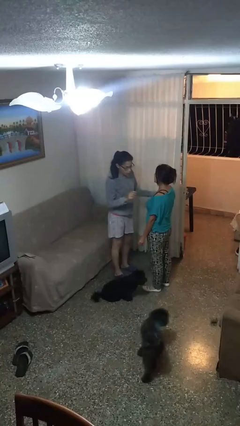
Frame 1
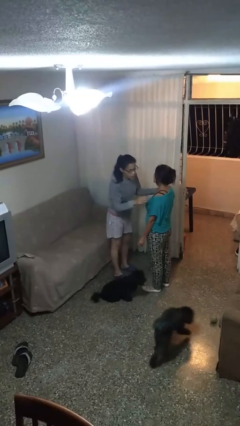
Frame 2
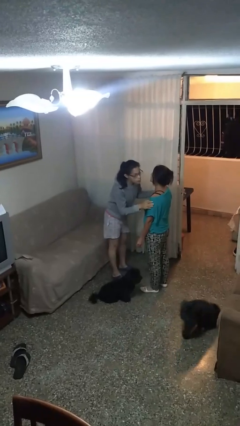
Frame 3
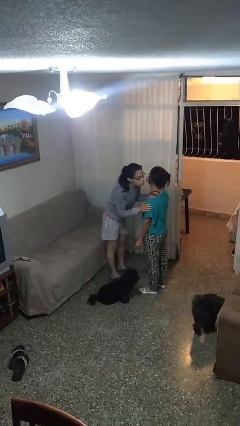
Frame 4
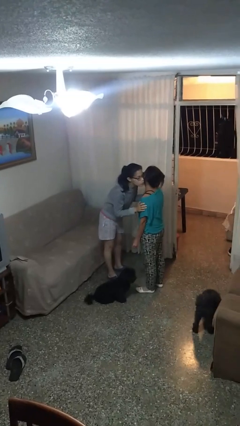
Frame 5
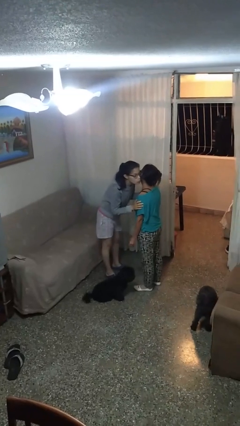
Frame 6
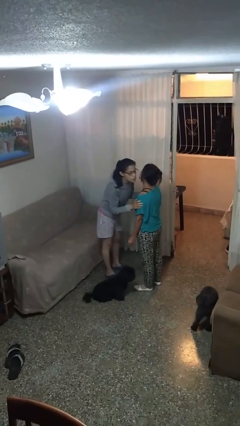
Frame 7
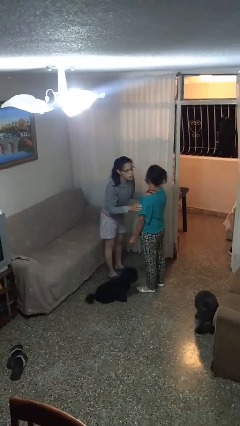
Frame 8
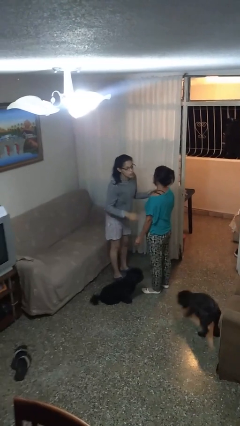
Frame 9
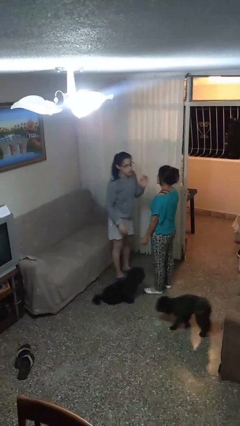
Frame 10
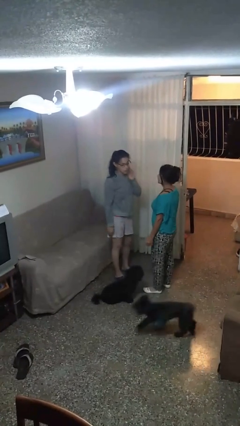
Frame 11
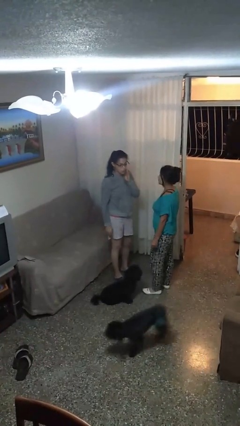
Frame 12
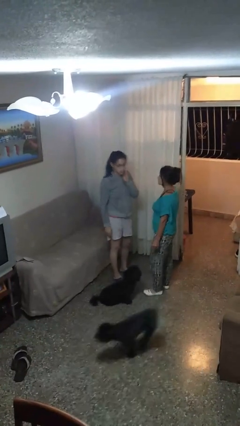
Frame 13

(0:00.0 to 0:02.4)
person kisses cheek of person

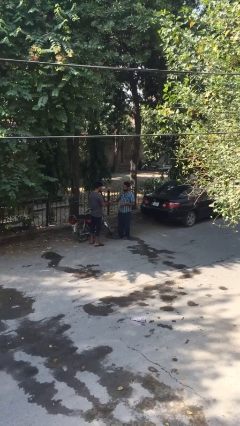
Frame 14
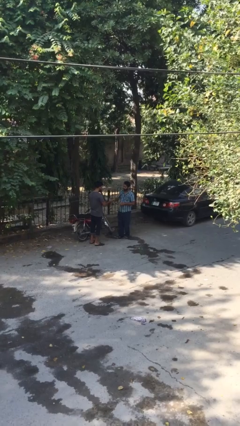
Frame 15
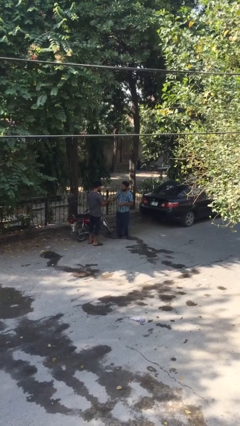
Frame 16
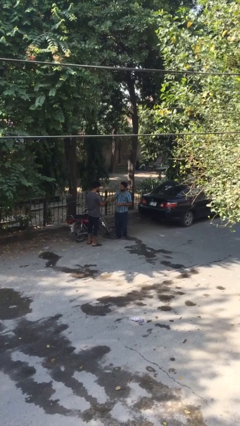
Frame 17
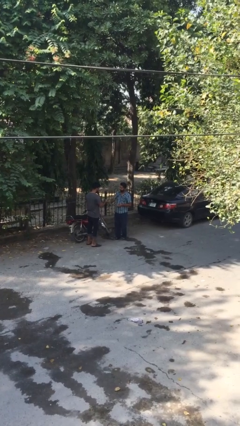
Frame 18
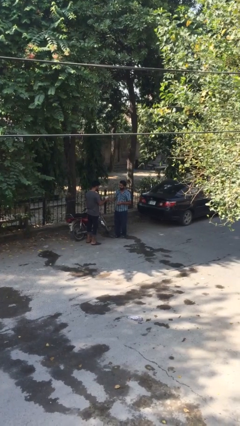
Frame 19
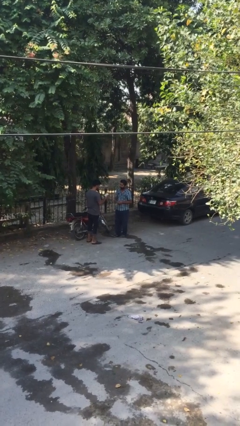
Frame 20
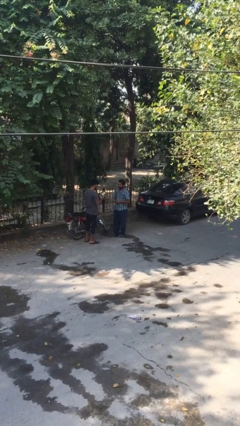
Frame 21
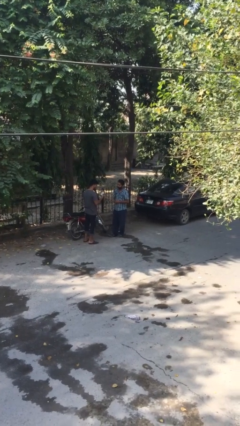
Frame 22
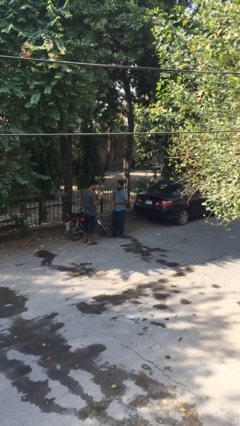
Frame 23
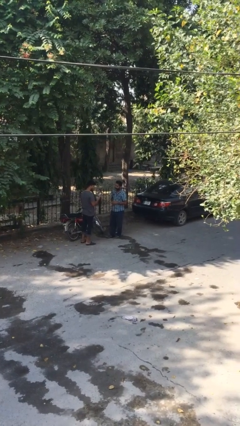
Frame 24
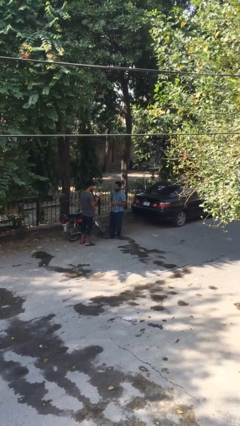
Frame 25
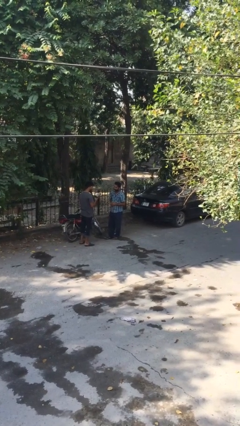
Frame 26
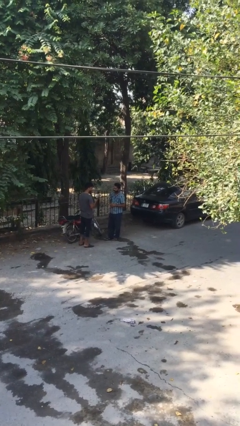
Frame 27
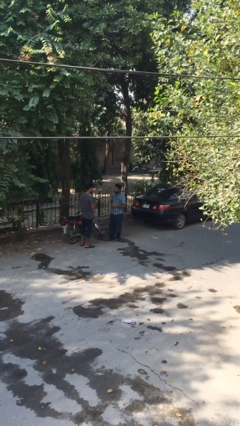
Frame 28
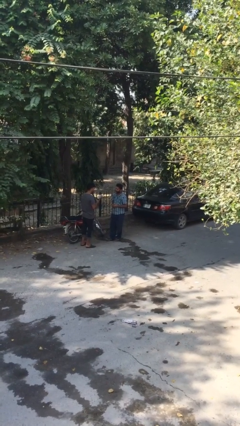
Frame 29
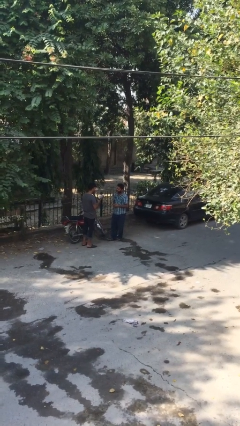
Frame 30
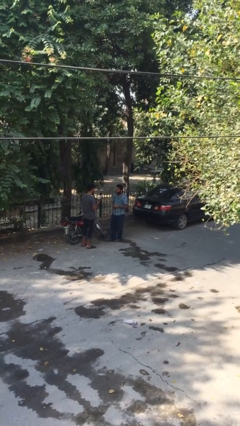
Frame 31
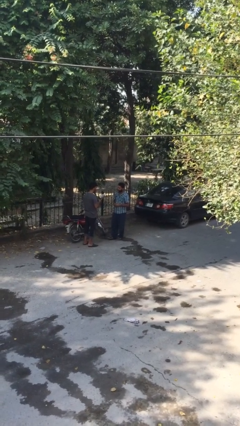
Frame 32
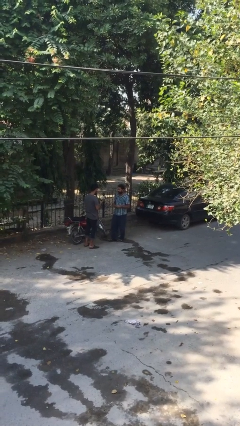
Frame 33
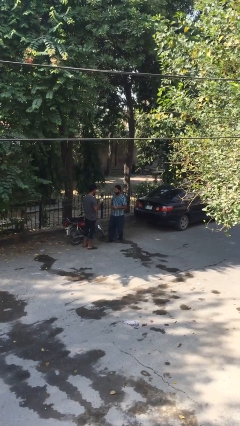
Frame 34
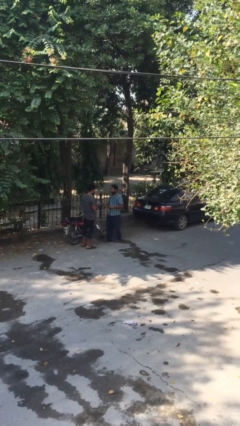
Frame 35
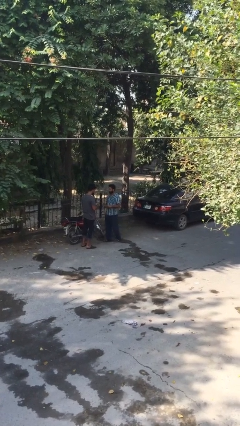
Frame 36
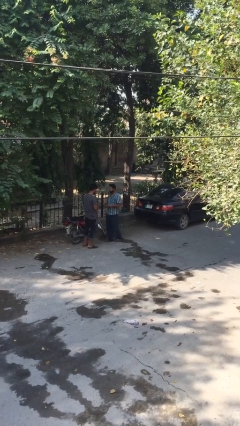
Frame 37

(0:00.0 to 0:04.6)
person transfers object to person

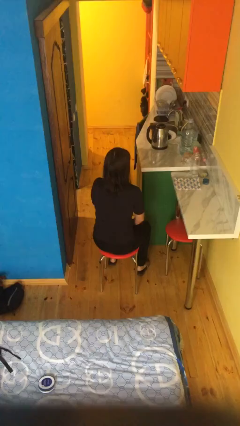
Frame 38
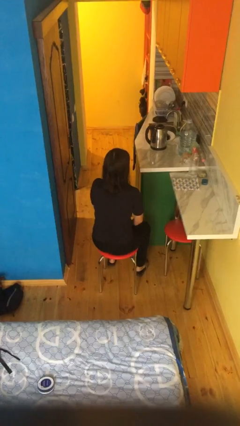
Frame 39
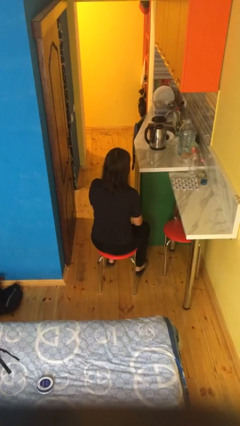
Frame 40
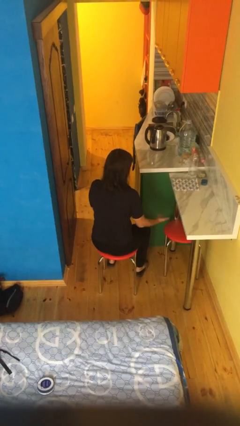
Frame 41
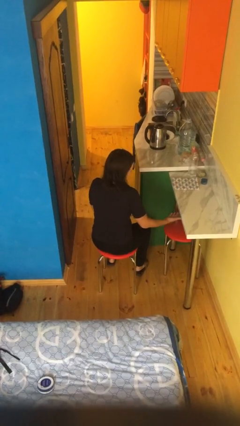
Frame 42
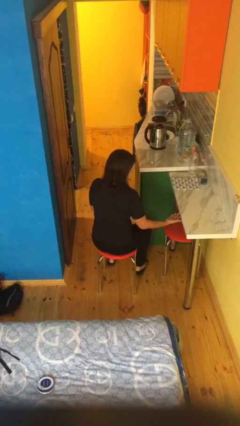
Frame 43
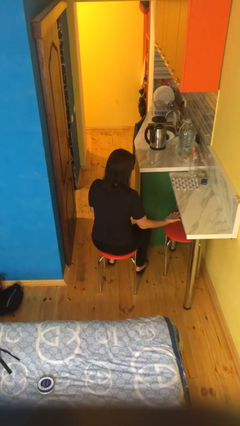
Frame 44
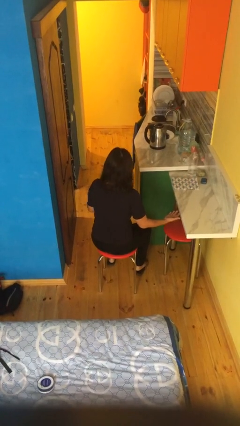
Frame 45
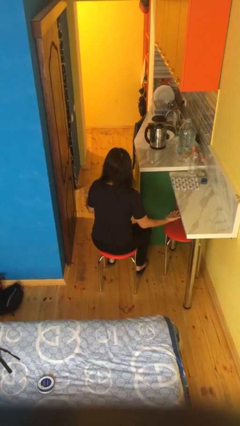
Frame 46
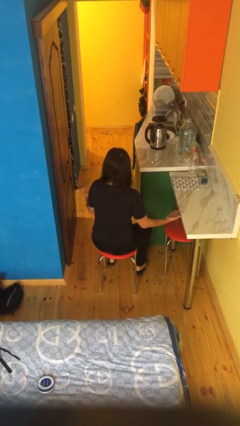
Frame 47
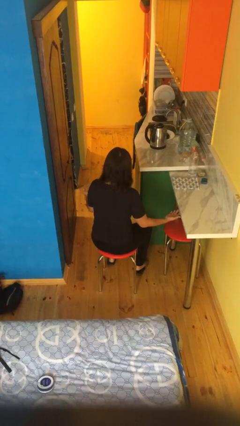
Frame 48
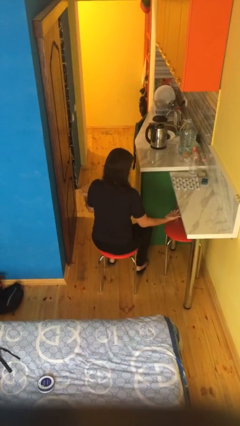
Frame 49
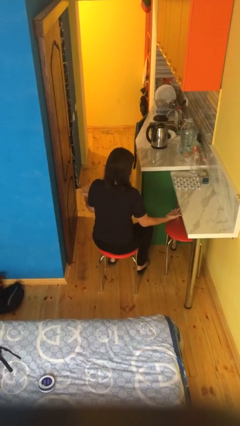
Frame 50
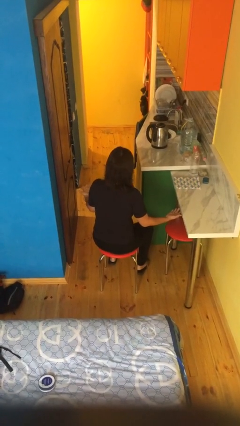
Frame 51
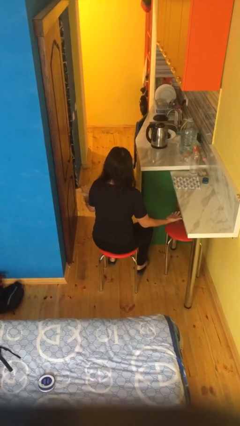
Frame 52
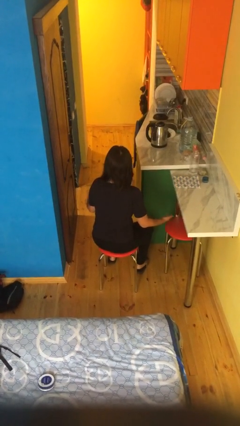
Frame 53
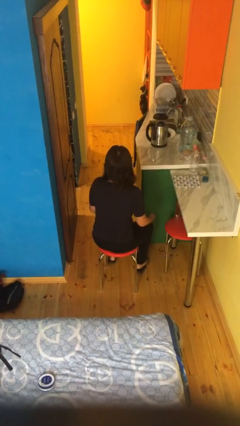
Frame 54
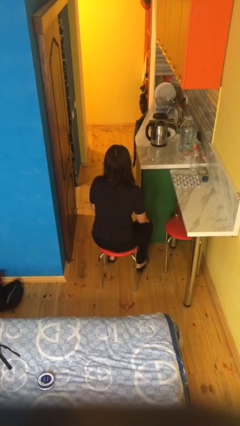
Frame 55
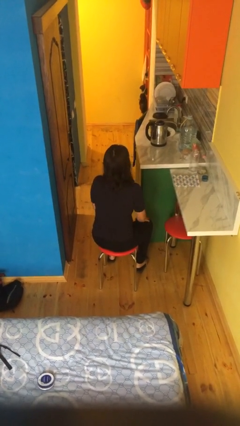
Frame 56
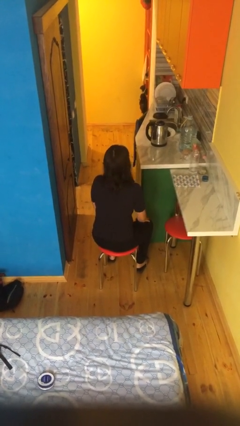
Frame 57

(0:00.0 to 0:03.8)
person looks at hands in lap

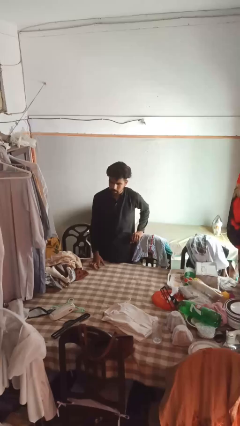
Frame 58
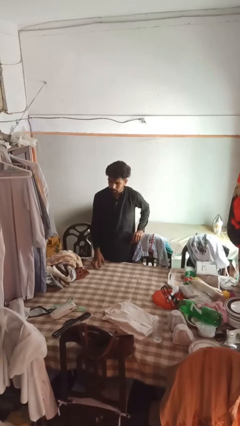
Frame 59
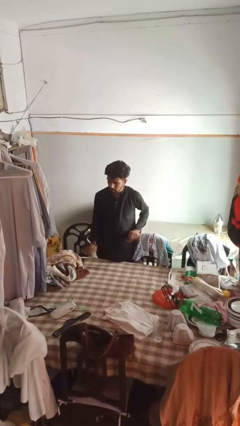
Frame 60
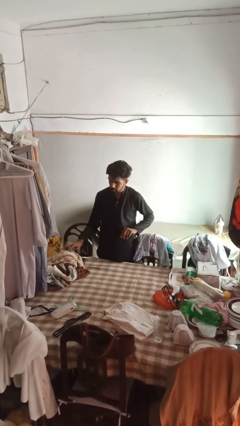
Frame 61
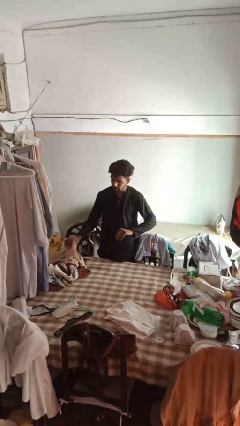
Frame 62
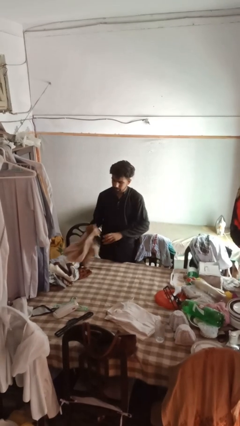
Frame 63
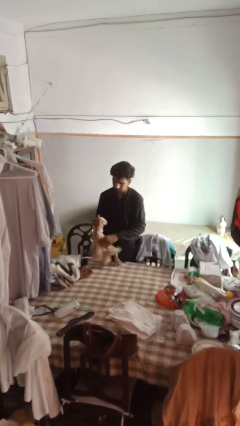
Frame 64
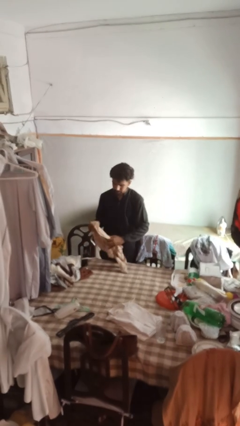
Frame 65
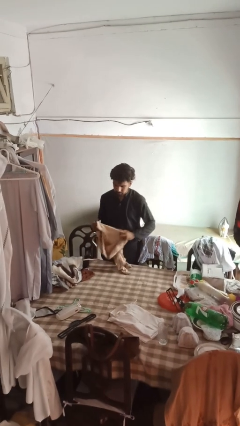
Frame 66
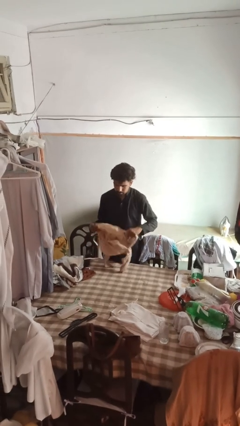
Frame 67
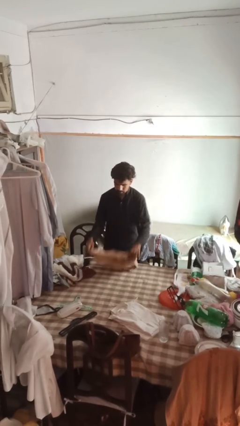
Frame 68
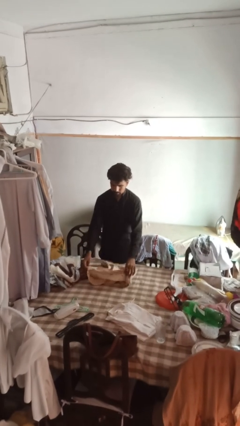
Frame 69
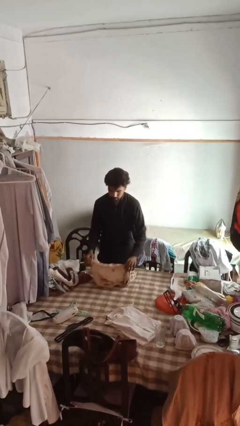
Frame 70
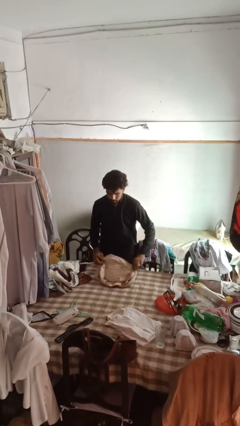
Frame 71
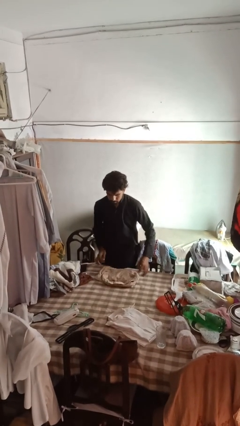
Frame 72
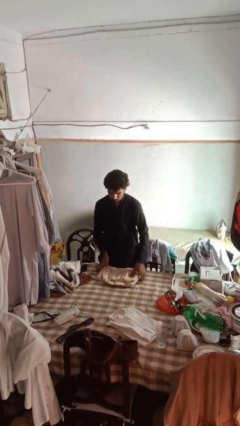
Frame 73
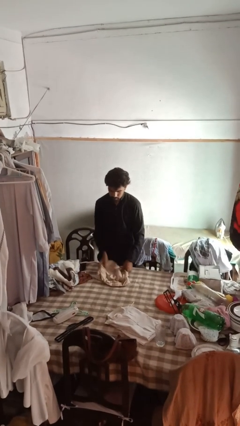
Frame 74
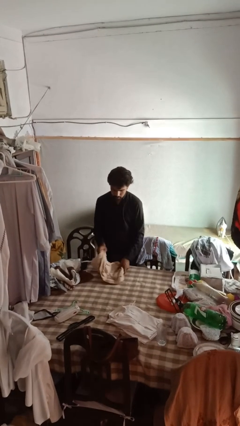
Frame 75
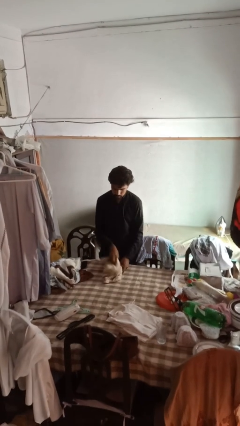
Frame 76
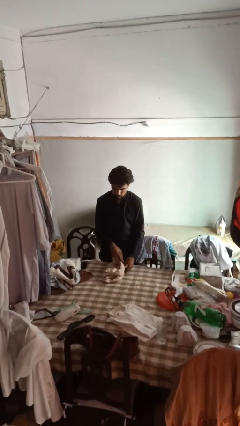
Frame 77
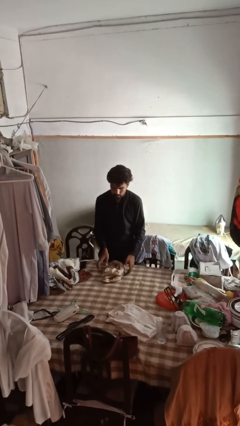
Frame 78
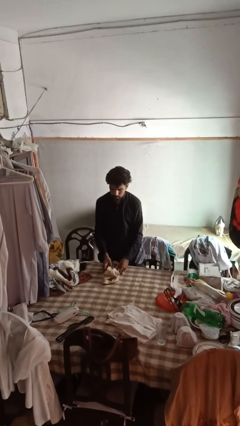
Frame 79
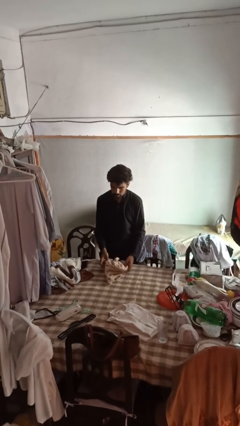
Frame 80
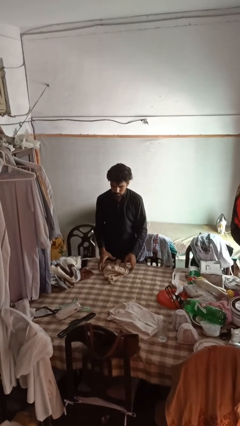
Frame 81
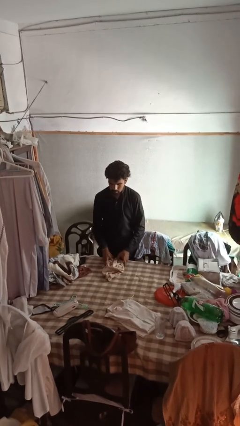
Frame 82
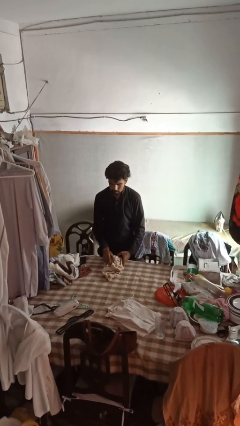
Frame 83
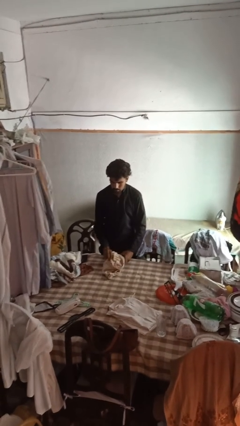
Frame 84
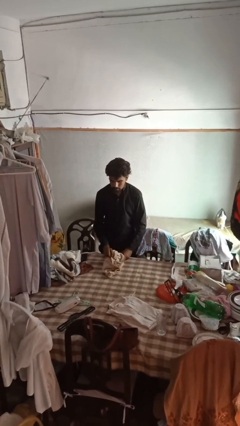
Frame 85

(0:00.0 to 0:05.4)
person folds shirt

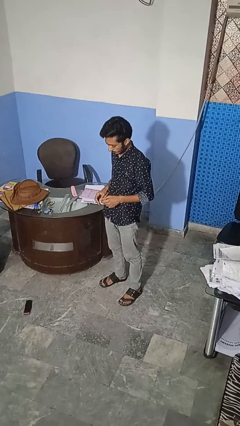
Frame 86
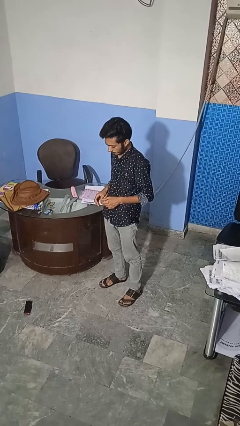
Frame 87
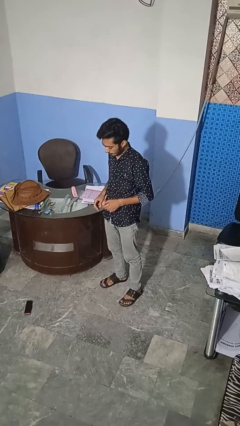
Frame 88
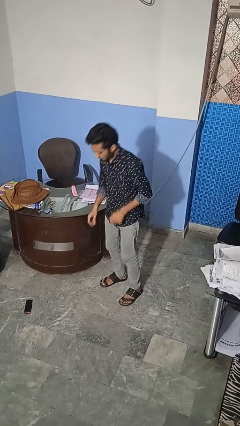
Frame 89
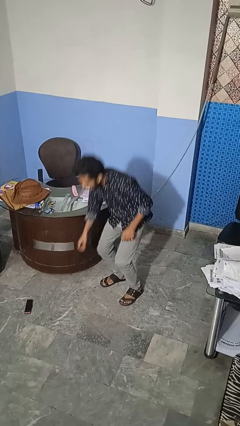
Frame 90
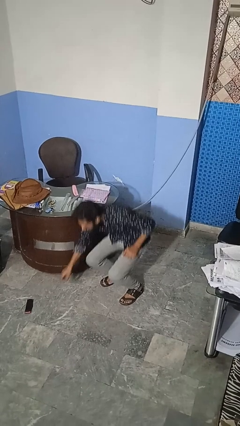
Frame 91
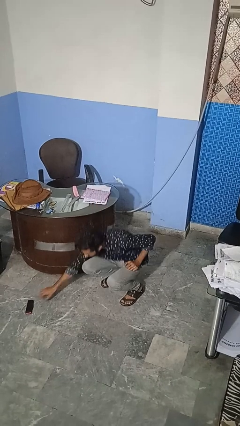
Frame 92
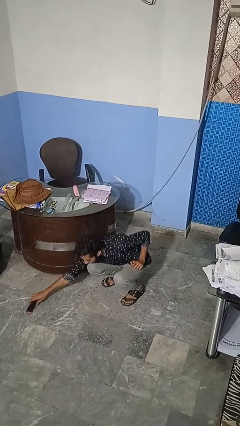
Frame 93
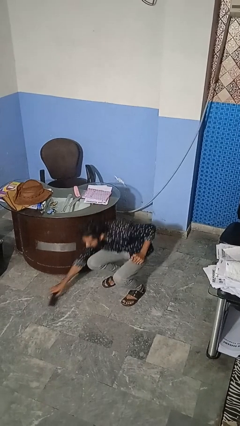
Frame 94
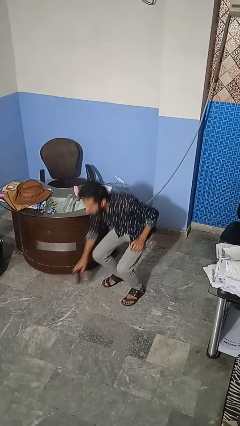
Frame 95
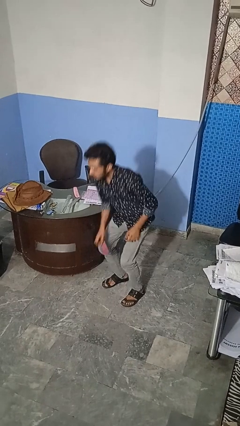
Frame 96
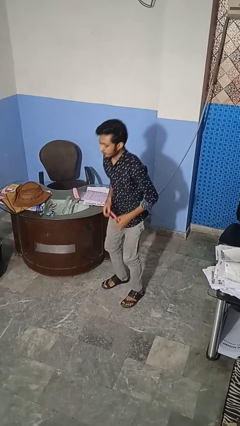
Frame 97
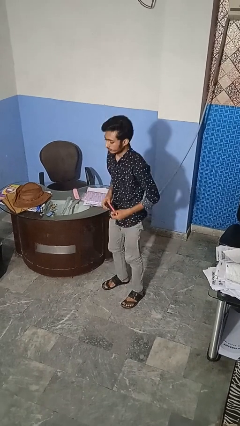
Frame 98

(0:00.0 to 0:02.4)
person picks up object from floor
